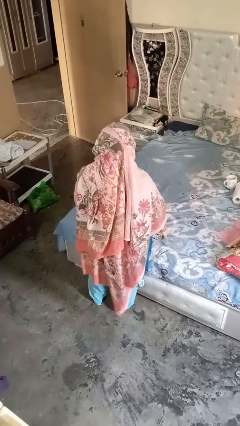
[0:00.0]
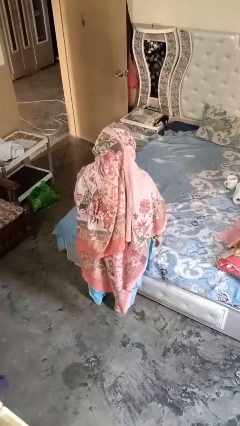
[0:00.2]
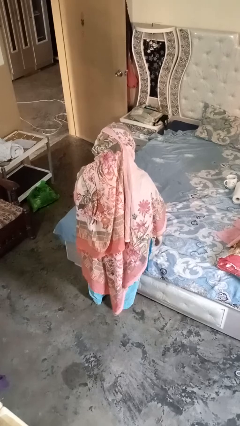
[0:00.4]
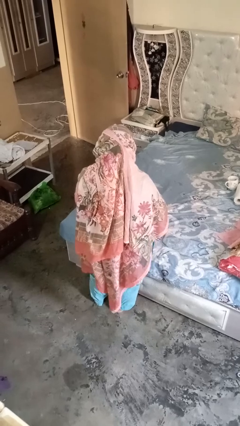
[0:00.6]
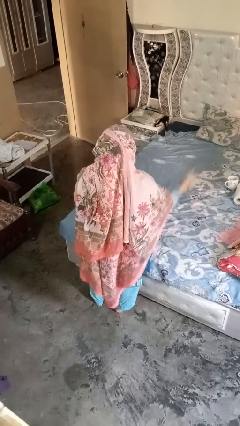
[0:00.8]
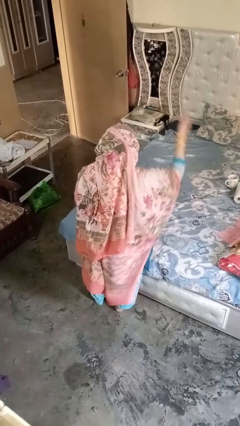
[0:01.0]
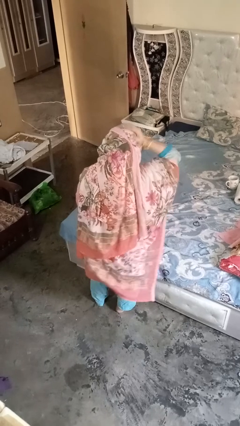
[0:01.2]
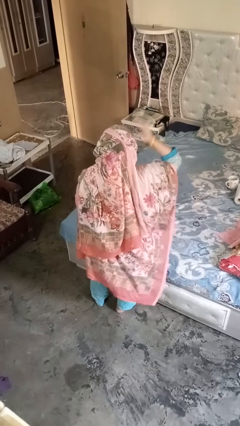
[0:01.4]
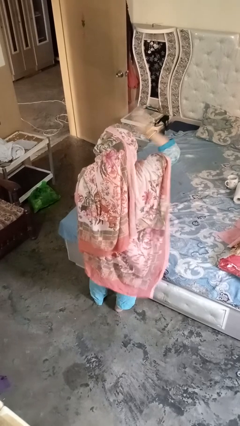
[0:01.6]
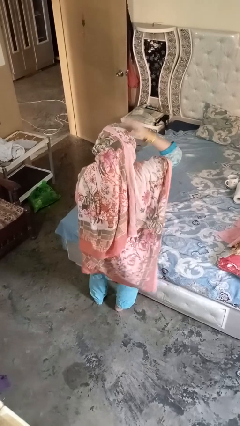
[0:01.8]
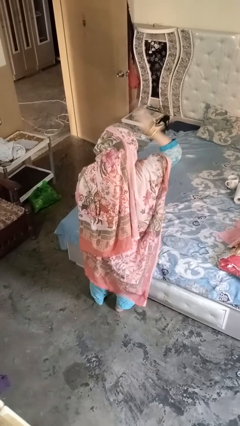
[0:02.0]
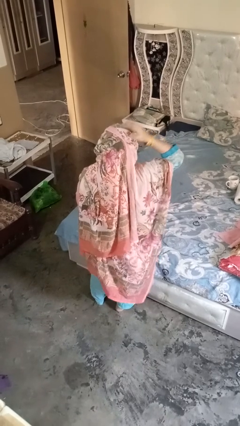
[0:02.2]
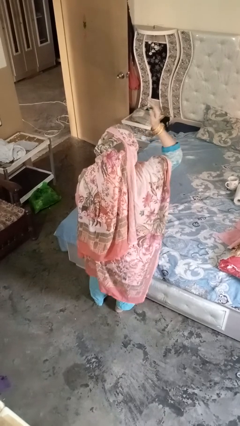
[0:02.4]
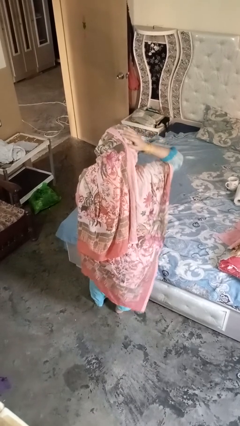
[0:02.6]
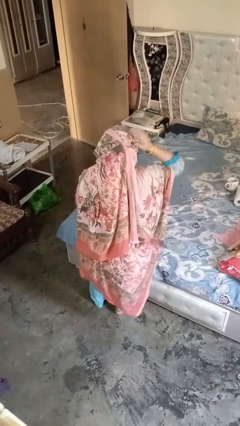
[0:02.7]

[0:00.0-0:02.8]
person pats head

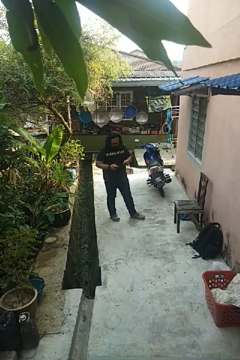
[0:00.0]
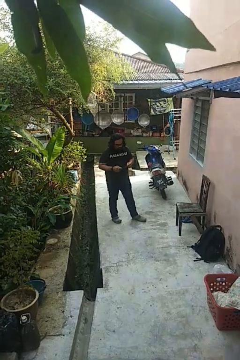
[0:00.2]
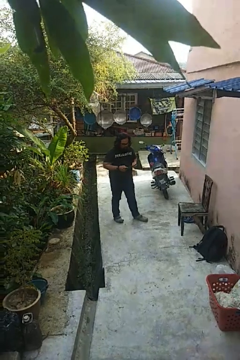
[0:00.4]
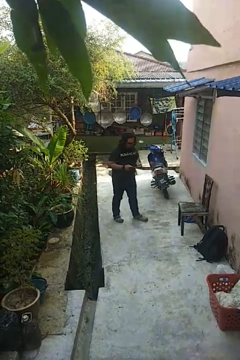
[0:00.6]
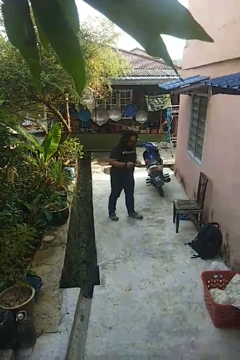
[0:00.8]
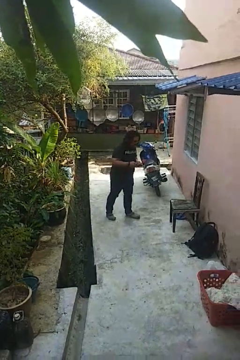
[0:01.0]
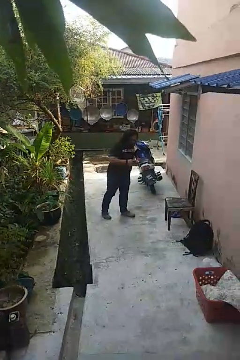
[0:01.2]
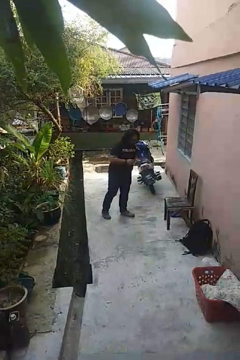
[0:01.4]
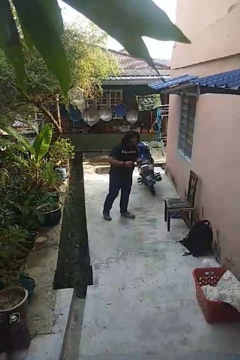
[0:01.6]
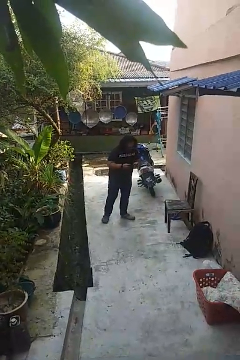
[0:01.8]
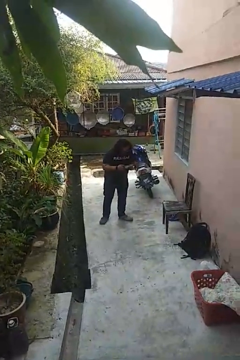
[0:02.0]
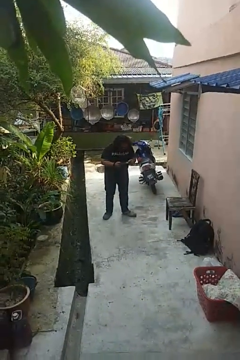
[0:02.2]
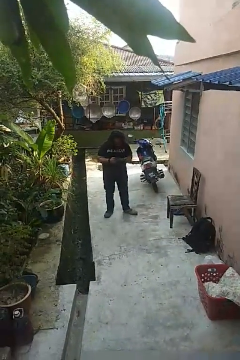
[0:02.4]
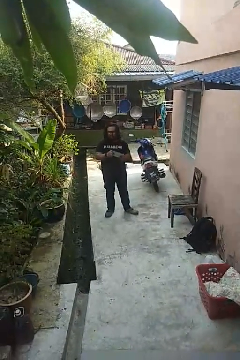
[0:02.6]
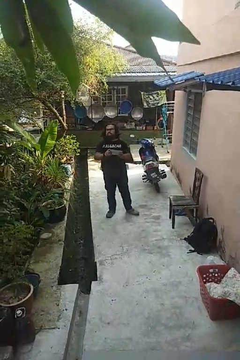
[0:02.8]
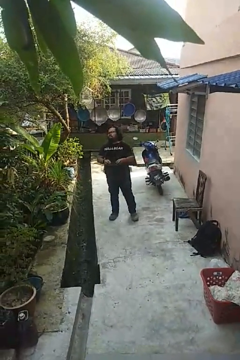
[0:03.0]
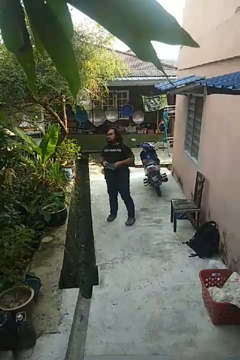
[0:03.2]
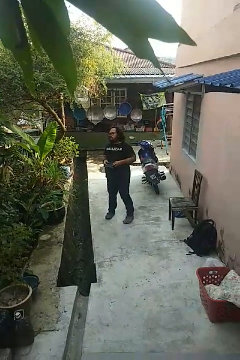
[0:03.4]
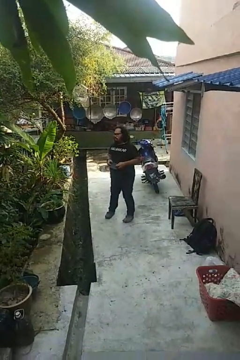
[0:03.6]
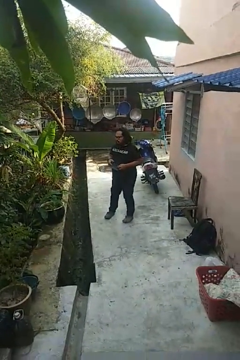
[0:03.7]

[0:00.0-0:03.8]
person interacts with handheld game

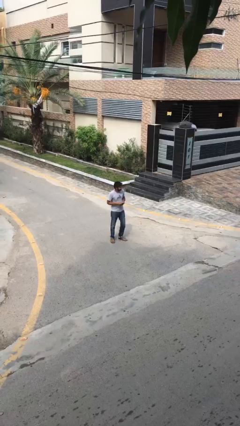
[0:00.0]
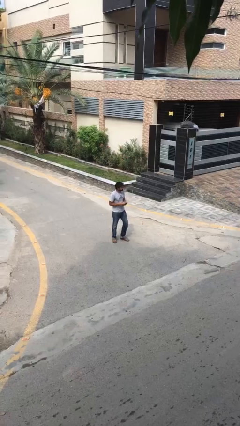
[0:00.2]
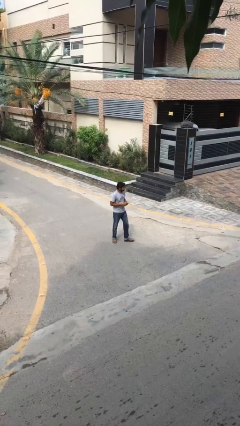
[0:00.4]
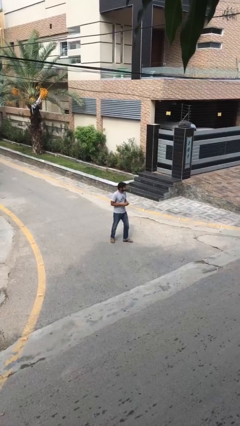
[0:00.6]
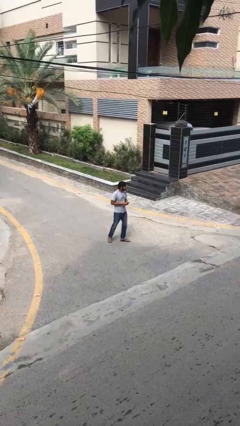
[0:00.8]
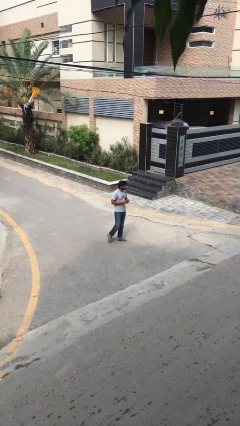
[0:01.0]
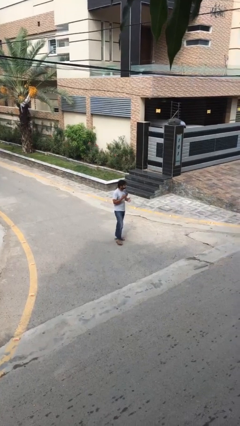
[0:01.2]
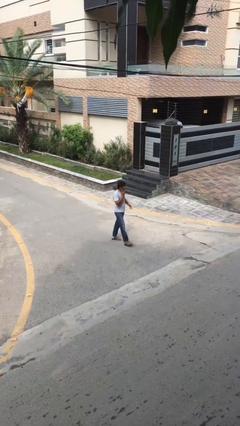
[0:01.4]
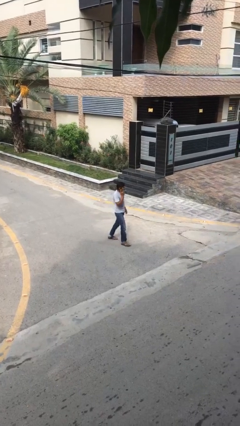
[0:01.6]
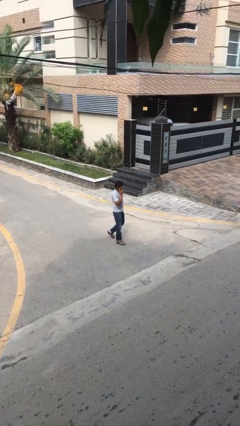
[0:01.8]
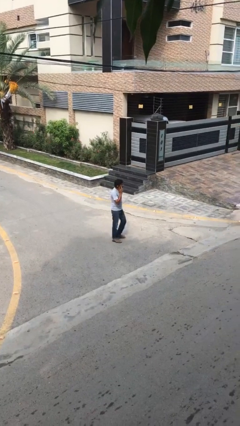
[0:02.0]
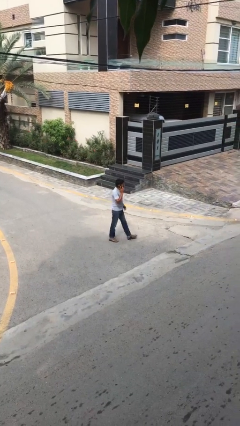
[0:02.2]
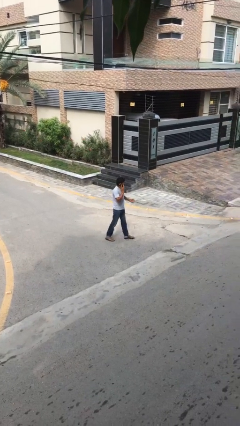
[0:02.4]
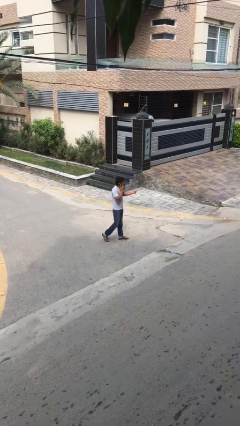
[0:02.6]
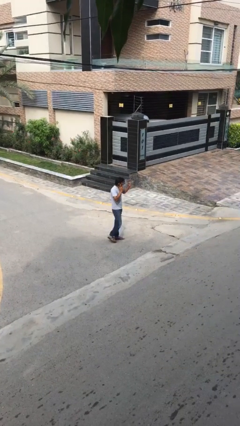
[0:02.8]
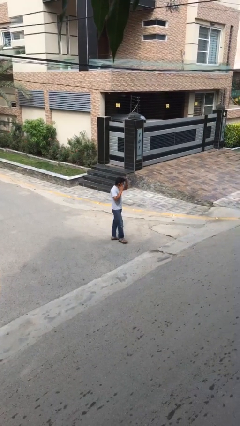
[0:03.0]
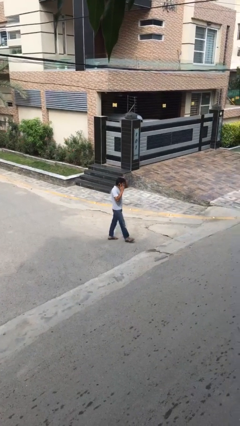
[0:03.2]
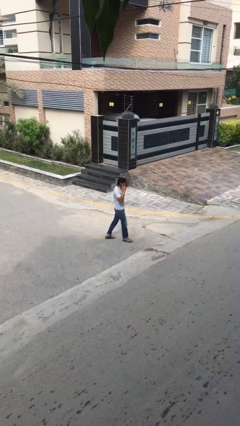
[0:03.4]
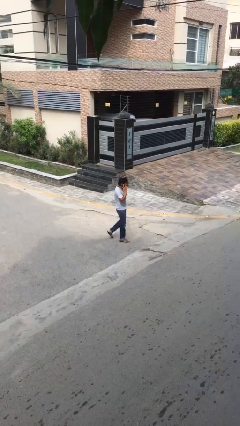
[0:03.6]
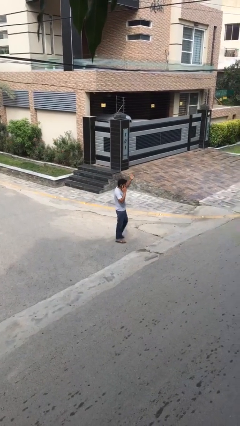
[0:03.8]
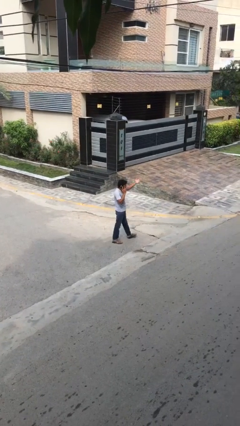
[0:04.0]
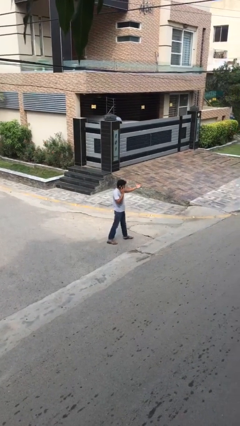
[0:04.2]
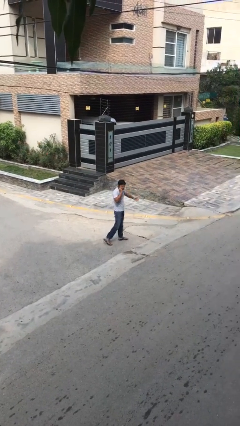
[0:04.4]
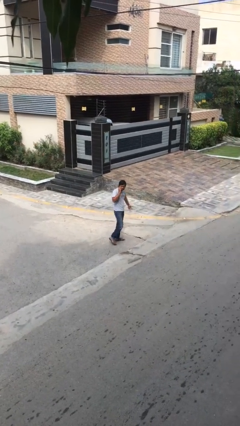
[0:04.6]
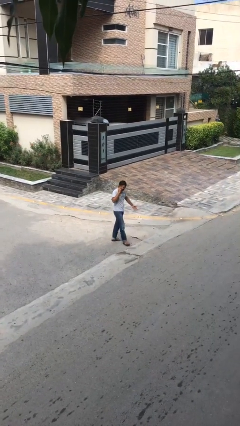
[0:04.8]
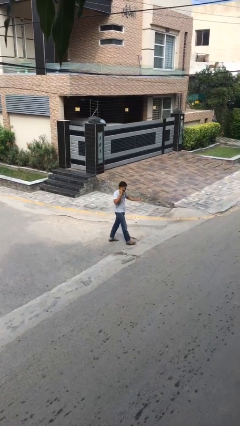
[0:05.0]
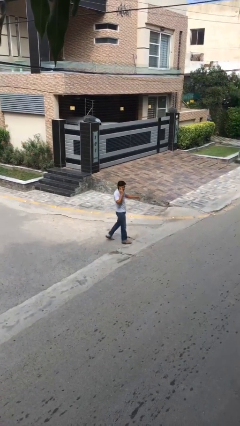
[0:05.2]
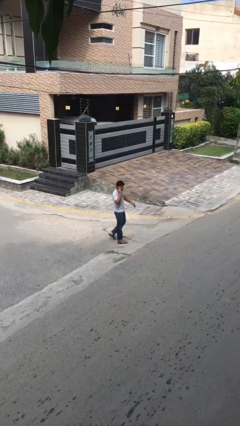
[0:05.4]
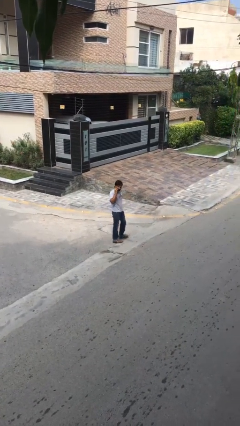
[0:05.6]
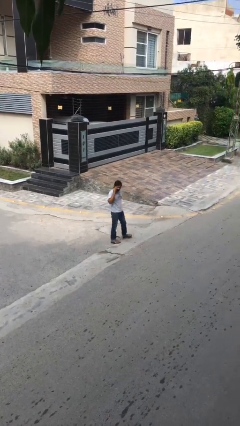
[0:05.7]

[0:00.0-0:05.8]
person talks on phone

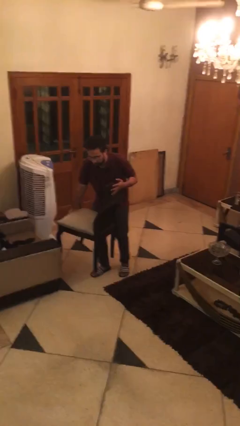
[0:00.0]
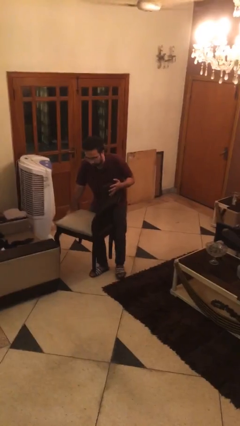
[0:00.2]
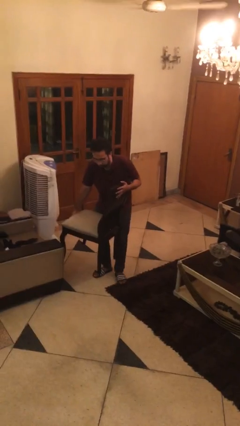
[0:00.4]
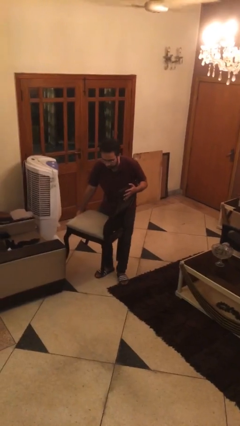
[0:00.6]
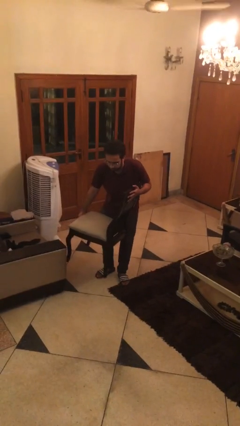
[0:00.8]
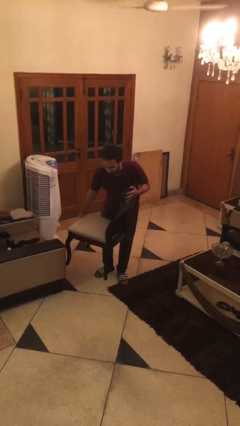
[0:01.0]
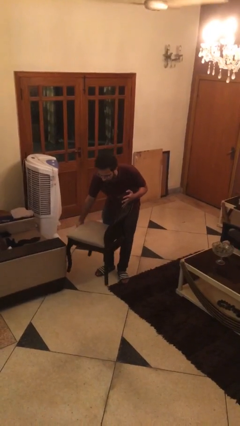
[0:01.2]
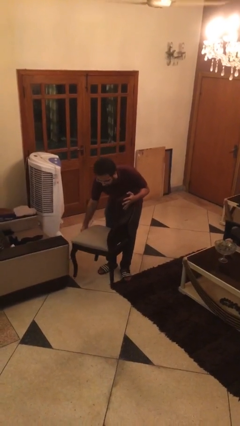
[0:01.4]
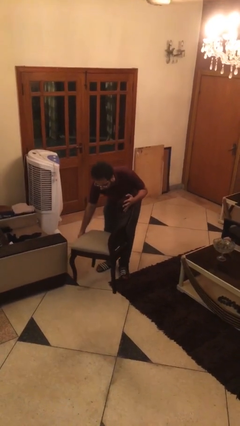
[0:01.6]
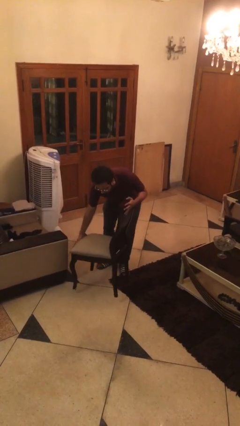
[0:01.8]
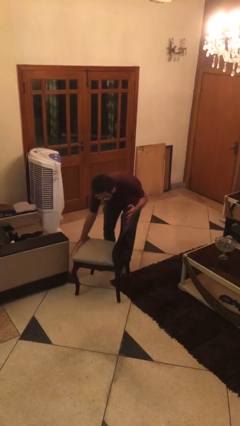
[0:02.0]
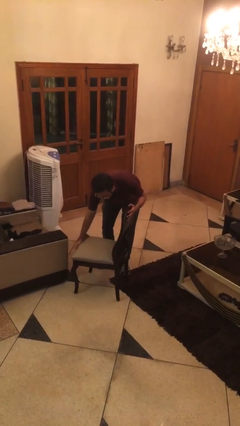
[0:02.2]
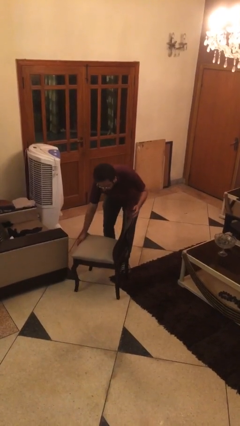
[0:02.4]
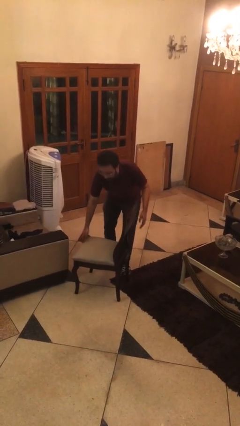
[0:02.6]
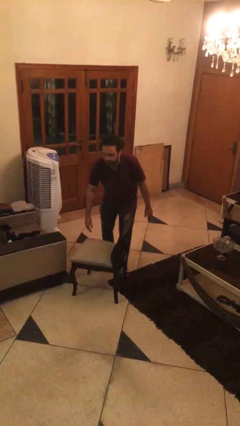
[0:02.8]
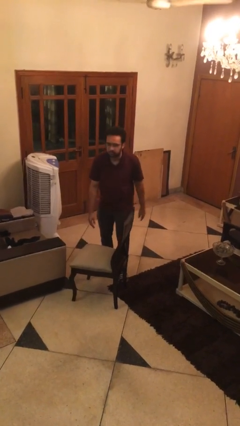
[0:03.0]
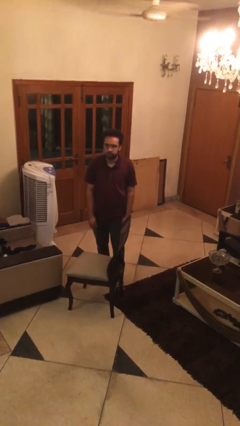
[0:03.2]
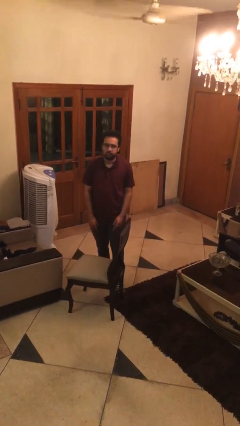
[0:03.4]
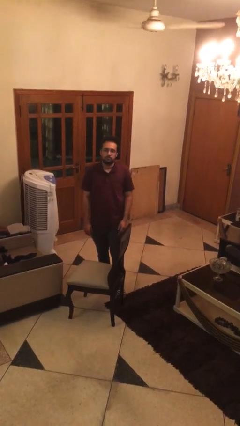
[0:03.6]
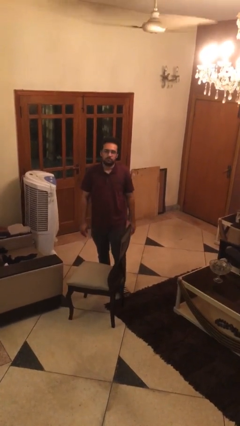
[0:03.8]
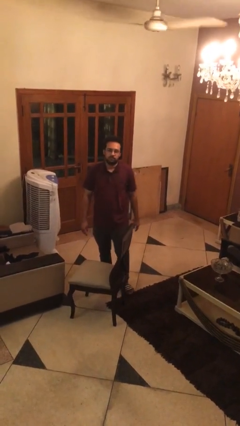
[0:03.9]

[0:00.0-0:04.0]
person puts down object on floor

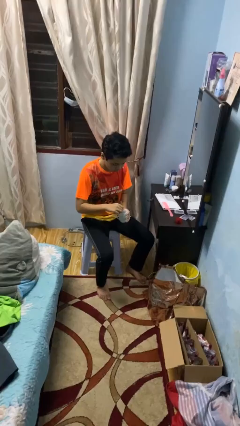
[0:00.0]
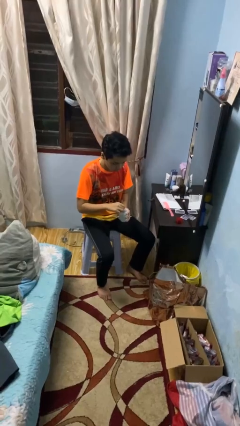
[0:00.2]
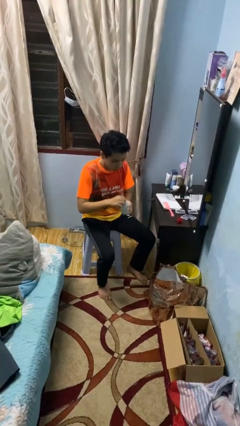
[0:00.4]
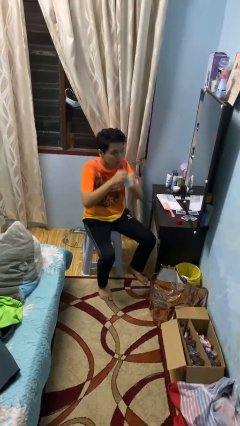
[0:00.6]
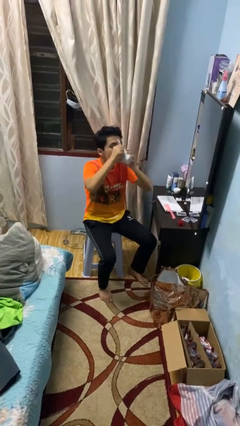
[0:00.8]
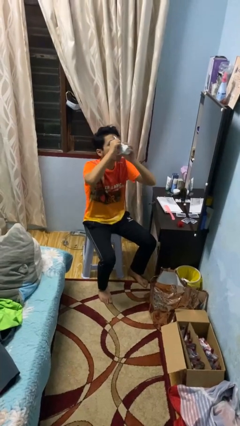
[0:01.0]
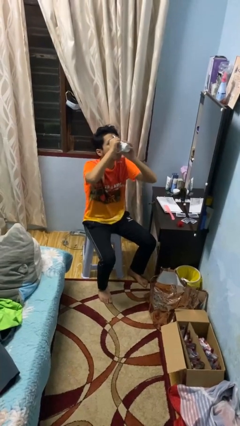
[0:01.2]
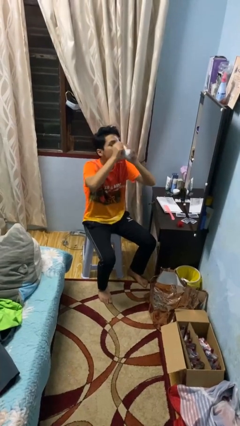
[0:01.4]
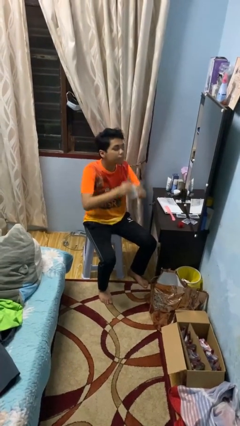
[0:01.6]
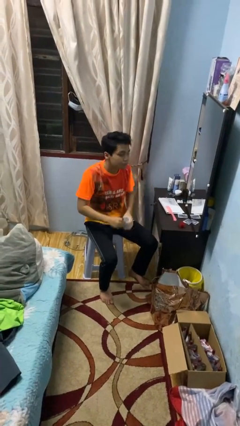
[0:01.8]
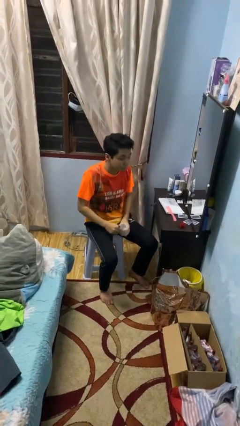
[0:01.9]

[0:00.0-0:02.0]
person drinks from mug

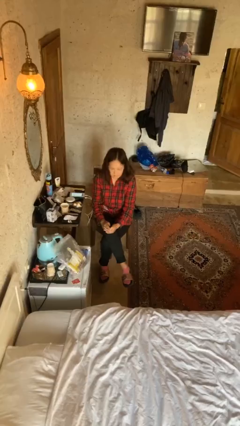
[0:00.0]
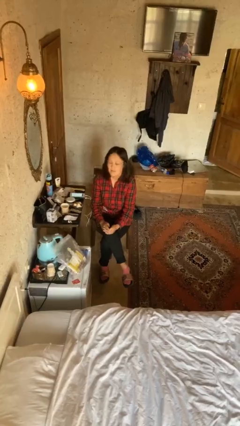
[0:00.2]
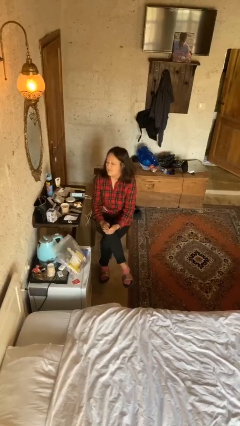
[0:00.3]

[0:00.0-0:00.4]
person shakes head
